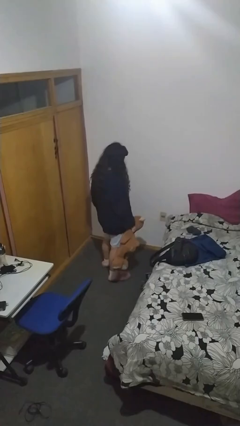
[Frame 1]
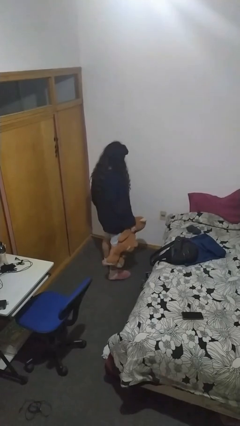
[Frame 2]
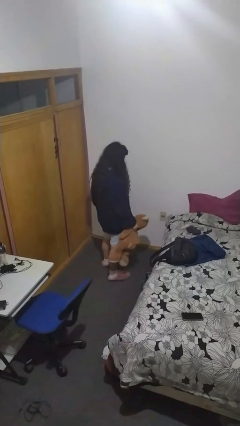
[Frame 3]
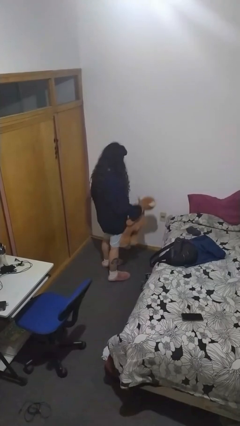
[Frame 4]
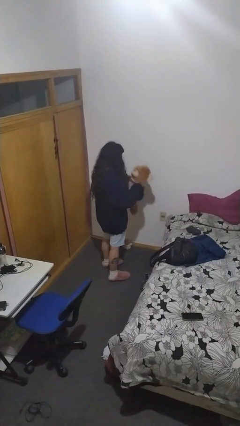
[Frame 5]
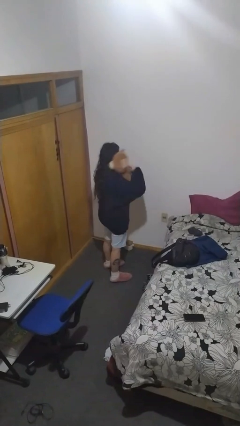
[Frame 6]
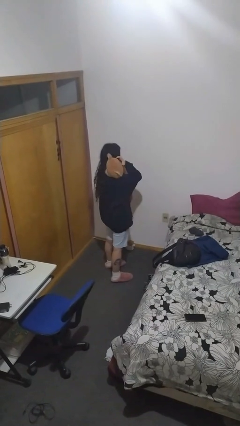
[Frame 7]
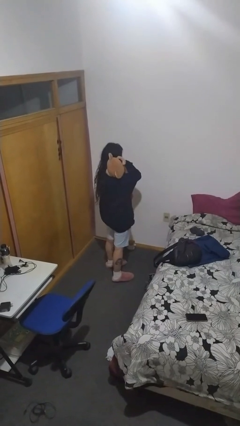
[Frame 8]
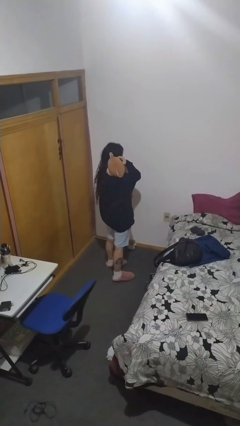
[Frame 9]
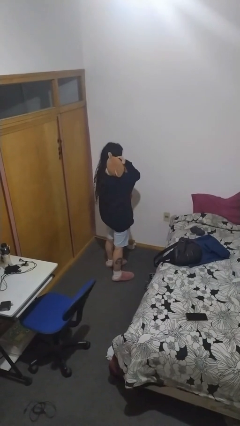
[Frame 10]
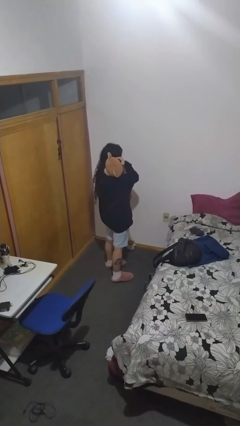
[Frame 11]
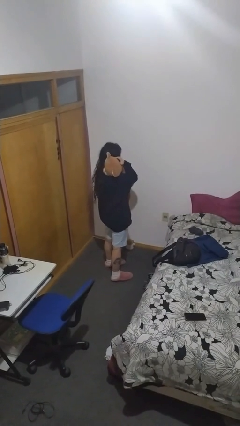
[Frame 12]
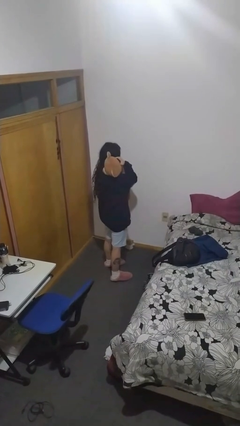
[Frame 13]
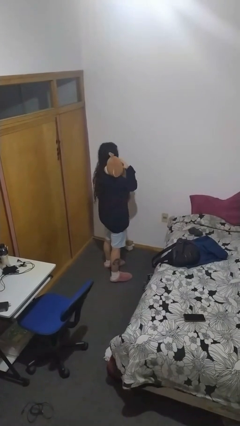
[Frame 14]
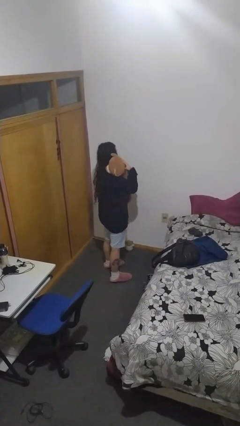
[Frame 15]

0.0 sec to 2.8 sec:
person hugs stuffed animal

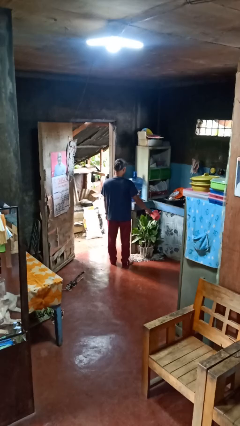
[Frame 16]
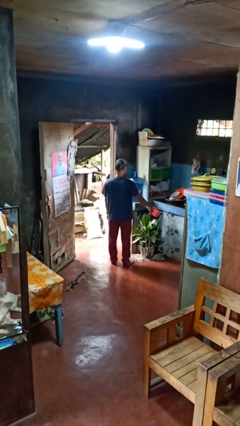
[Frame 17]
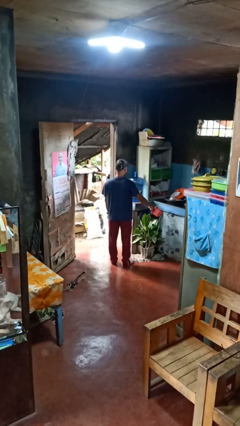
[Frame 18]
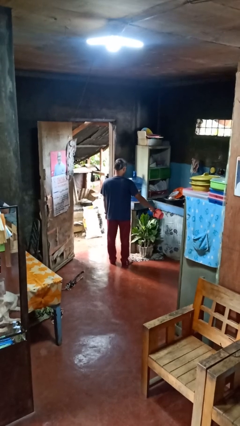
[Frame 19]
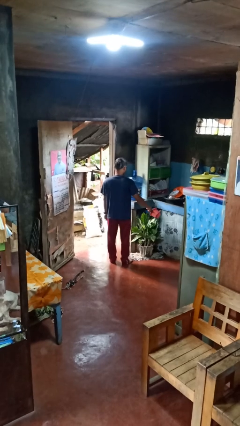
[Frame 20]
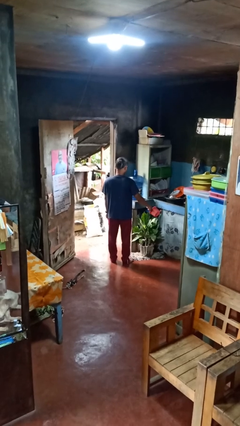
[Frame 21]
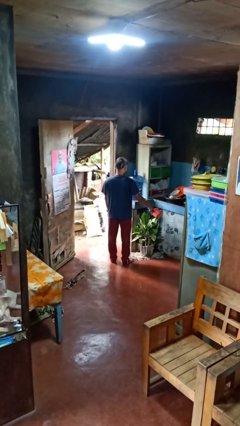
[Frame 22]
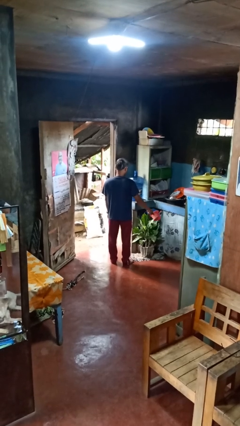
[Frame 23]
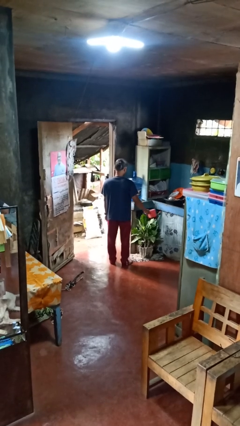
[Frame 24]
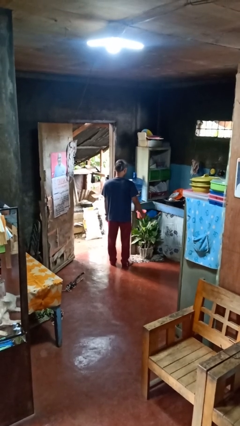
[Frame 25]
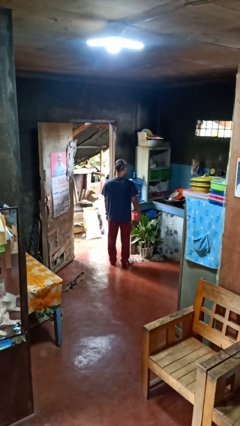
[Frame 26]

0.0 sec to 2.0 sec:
person waters houseplant

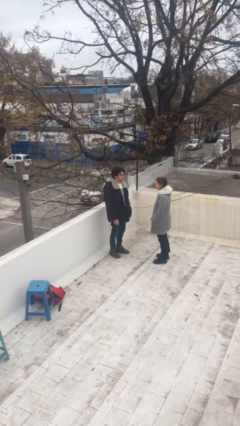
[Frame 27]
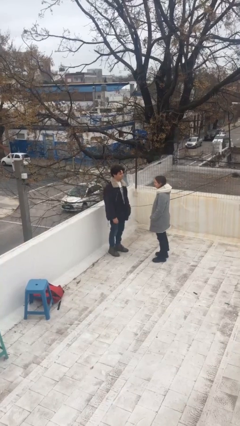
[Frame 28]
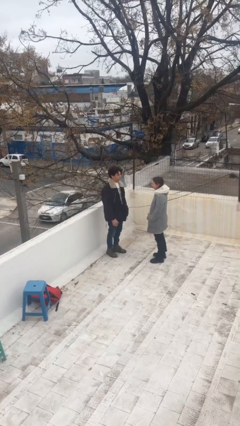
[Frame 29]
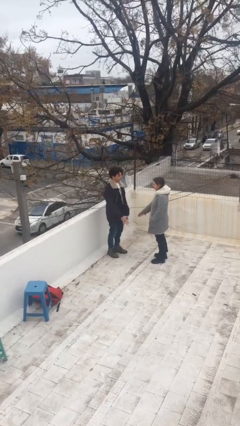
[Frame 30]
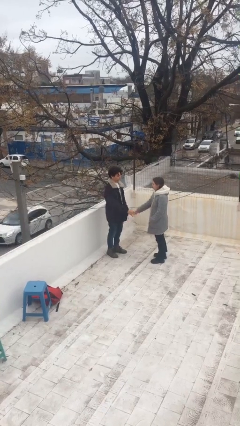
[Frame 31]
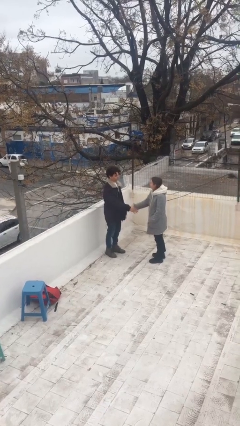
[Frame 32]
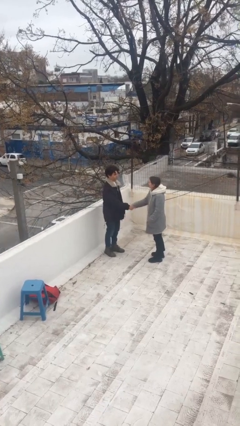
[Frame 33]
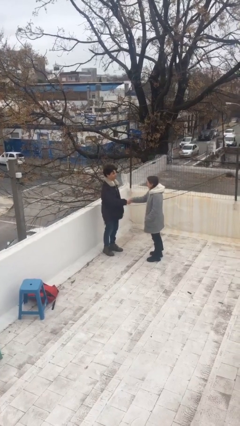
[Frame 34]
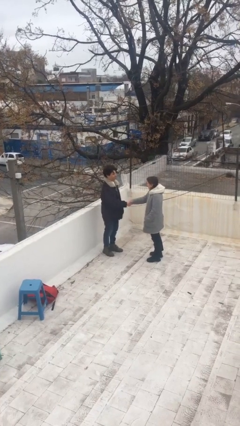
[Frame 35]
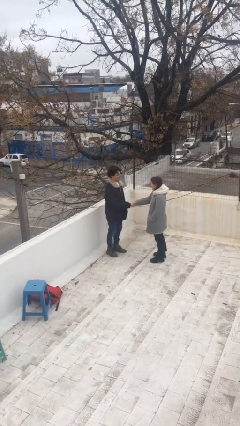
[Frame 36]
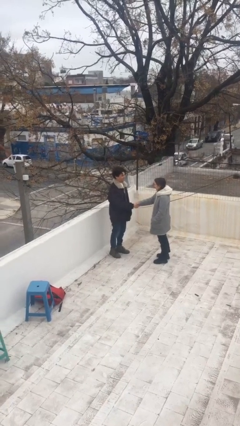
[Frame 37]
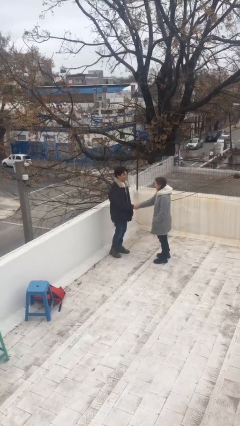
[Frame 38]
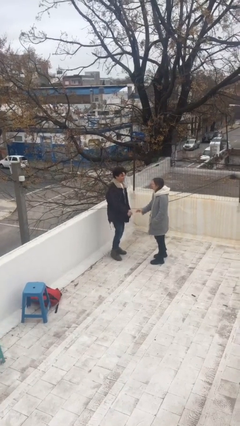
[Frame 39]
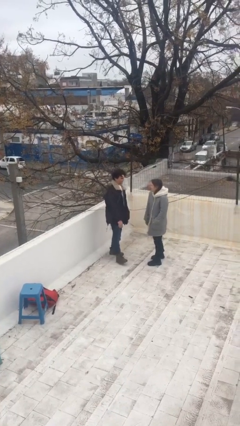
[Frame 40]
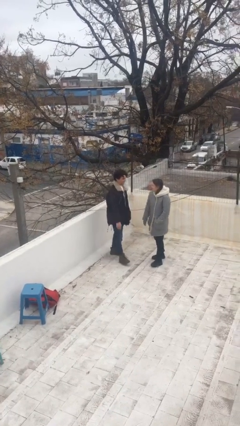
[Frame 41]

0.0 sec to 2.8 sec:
person shakes hand

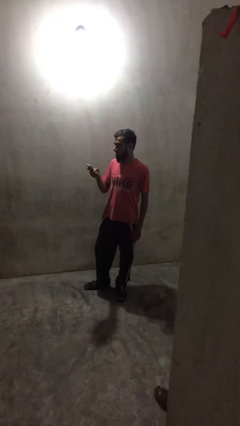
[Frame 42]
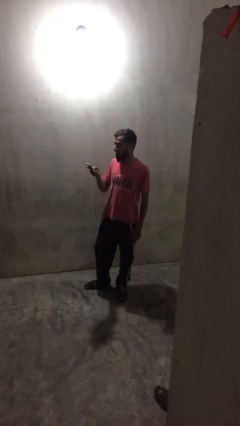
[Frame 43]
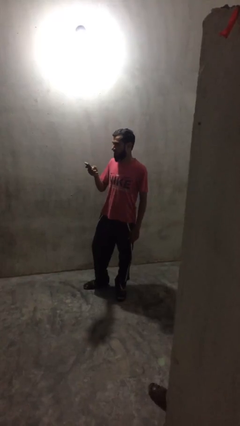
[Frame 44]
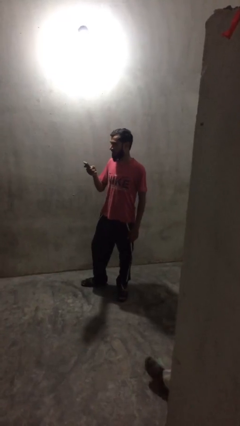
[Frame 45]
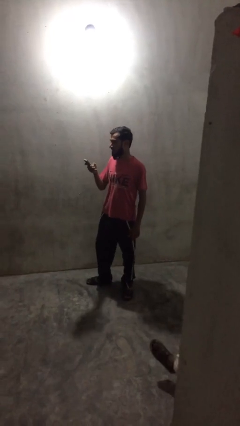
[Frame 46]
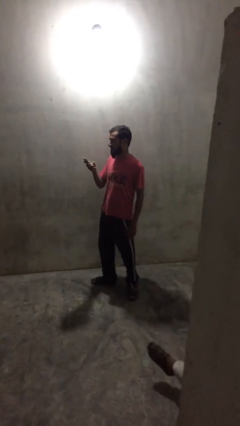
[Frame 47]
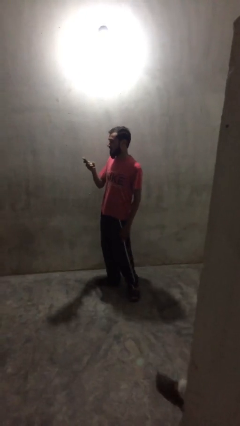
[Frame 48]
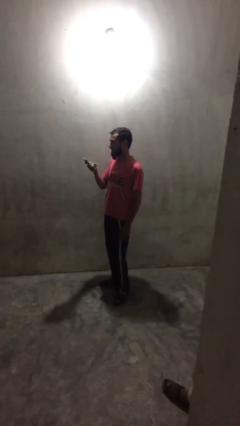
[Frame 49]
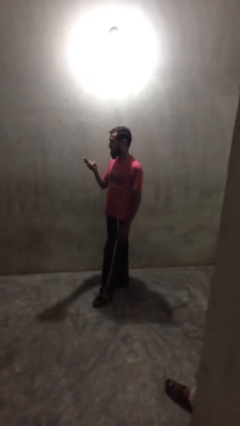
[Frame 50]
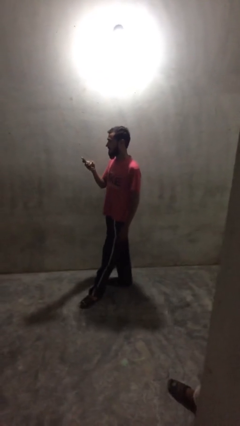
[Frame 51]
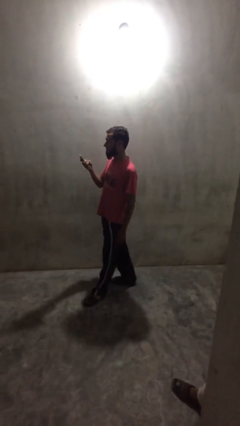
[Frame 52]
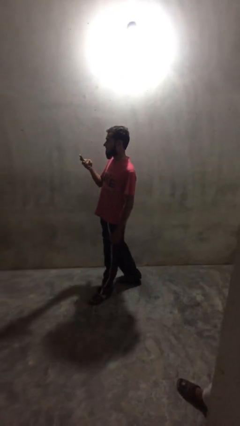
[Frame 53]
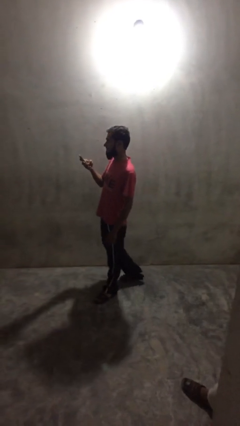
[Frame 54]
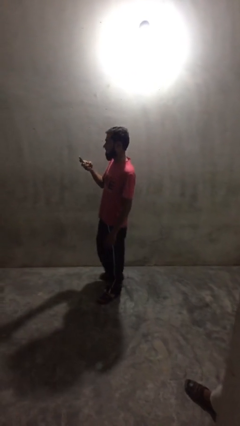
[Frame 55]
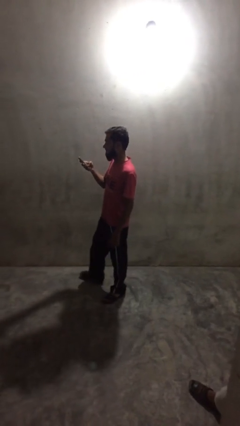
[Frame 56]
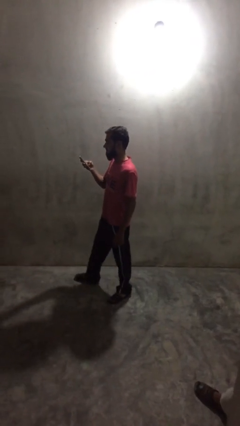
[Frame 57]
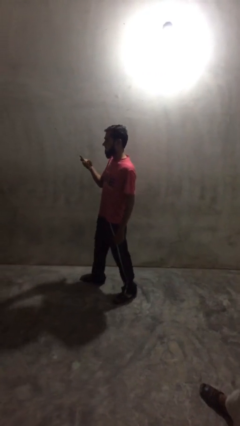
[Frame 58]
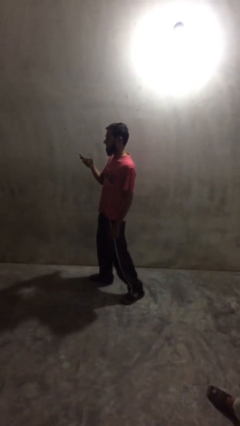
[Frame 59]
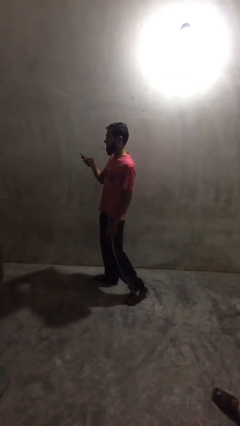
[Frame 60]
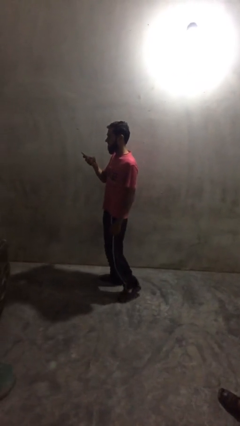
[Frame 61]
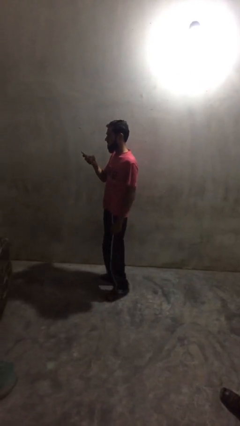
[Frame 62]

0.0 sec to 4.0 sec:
person texts on phone

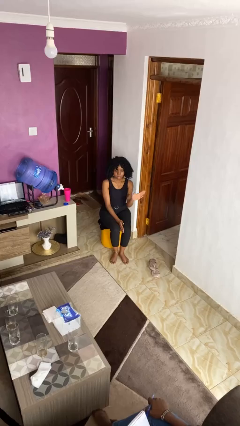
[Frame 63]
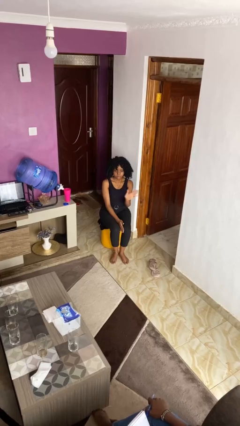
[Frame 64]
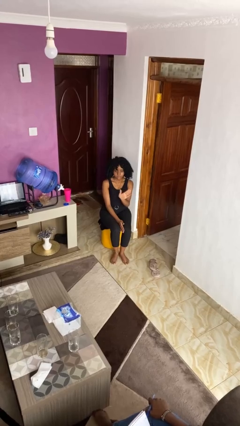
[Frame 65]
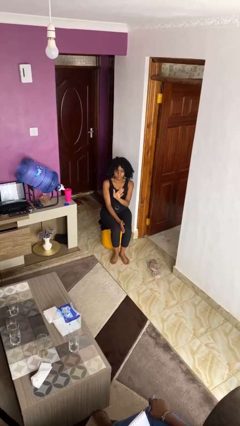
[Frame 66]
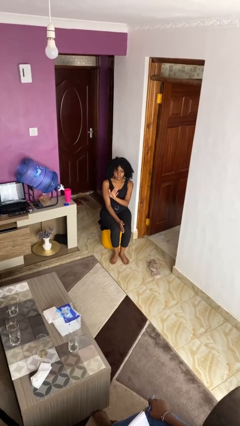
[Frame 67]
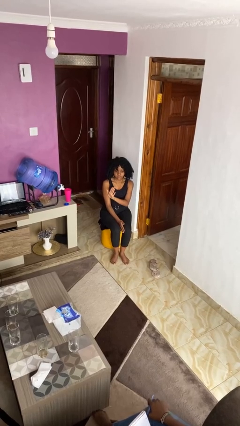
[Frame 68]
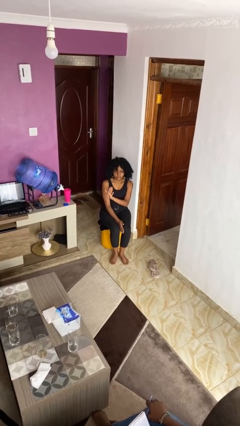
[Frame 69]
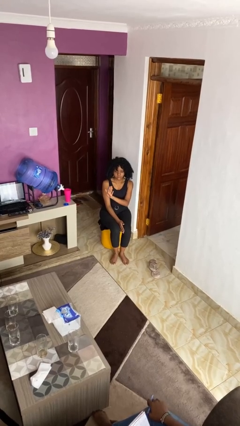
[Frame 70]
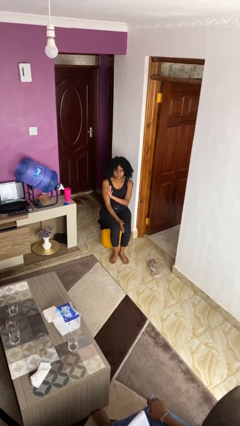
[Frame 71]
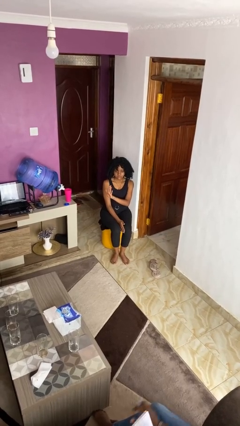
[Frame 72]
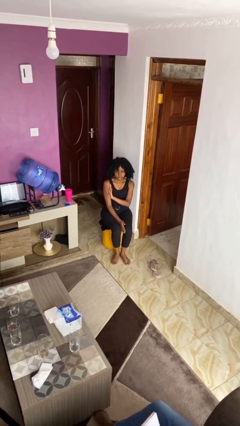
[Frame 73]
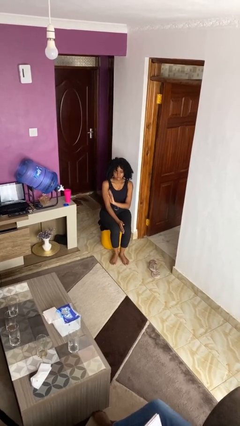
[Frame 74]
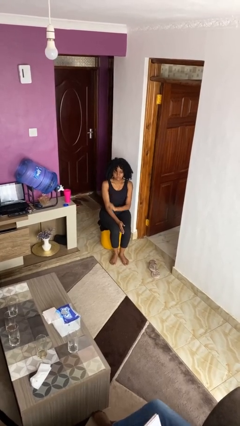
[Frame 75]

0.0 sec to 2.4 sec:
person gestures swipe right

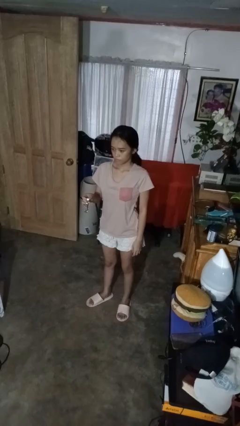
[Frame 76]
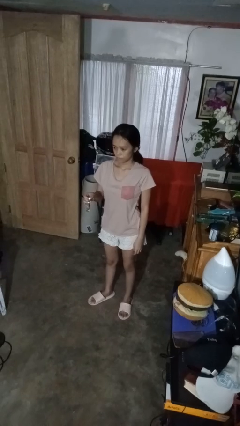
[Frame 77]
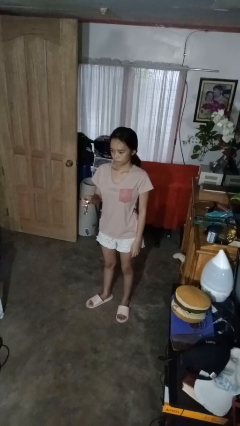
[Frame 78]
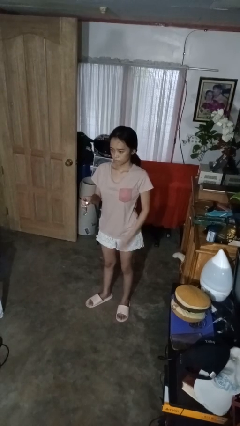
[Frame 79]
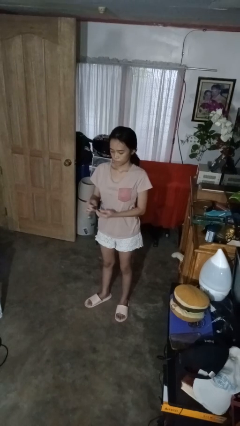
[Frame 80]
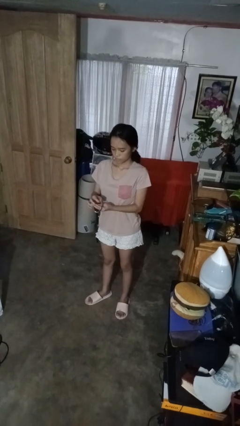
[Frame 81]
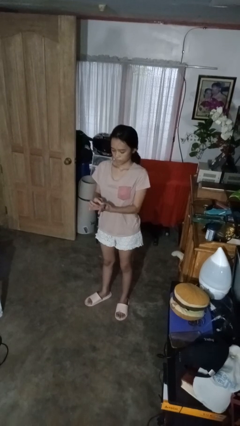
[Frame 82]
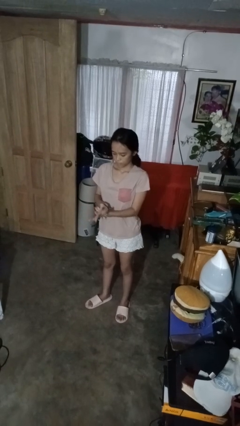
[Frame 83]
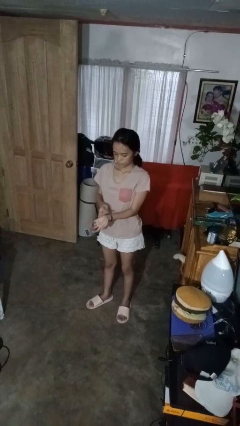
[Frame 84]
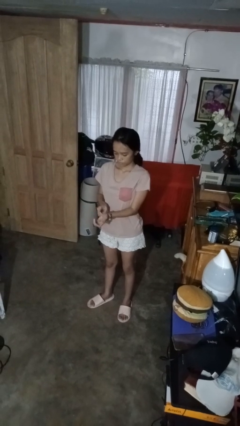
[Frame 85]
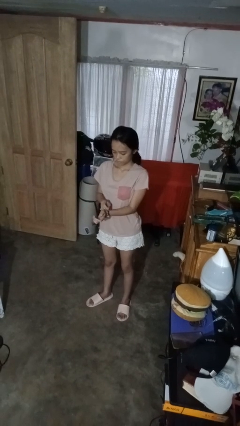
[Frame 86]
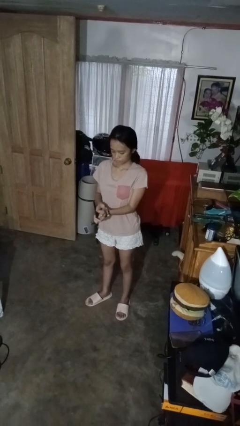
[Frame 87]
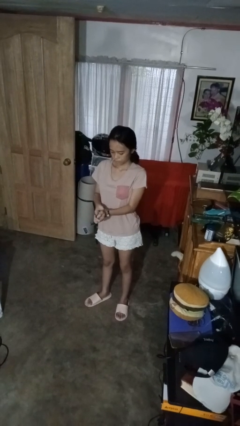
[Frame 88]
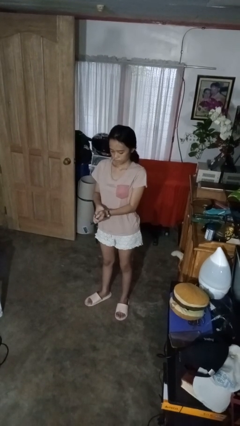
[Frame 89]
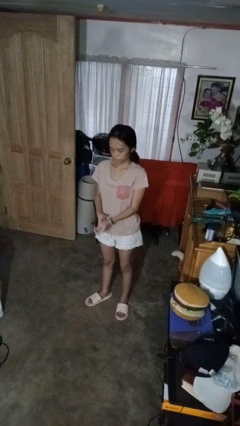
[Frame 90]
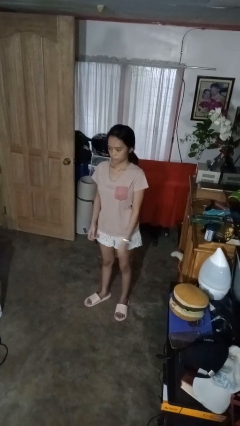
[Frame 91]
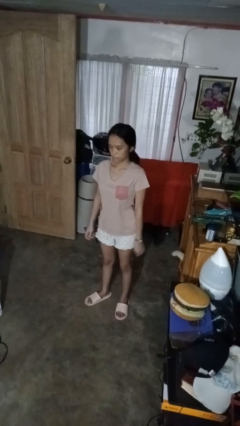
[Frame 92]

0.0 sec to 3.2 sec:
person puts on wristwatch
